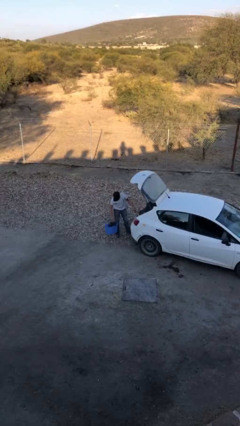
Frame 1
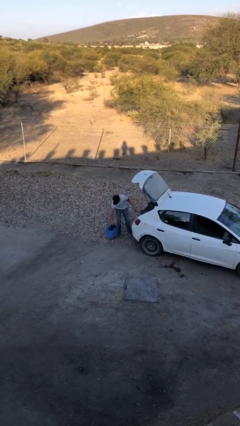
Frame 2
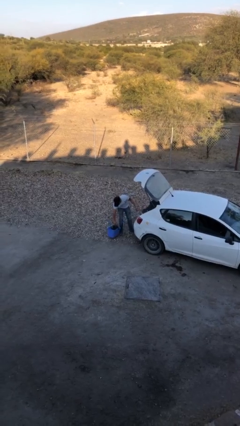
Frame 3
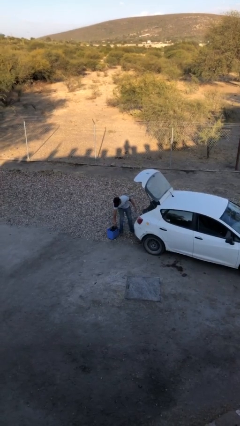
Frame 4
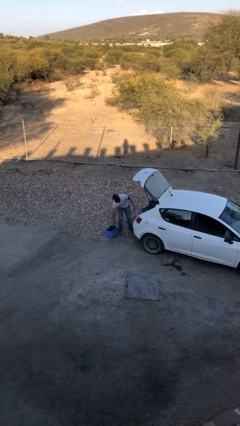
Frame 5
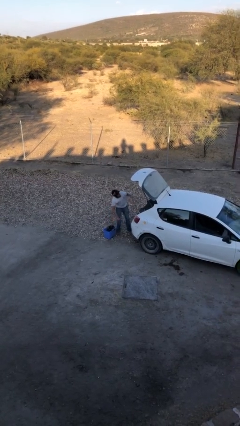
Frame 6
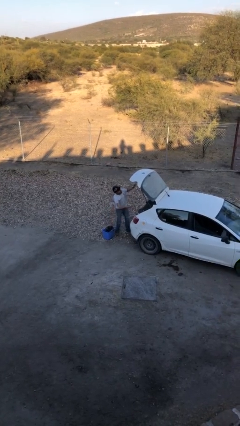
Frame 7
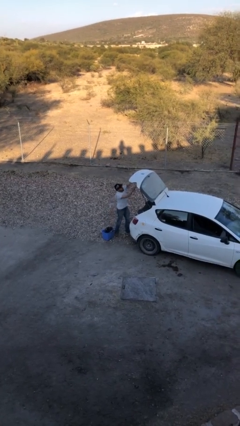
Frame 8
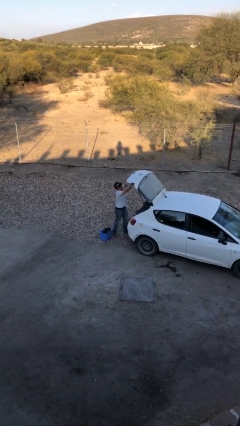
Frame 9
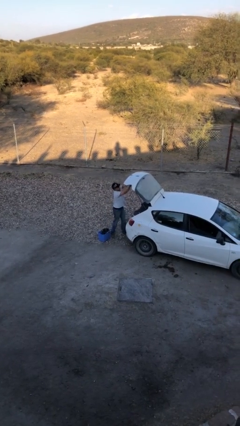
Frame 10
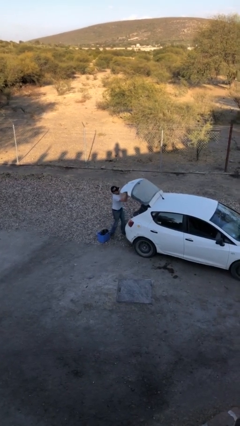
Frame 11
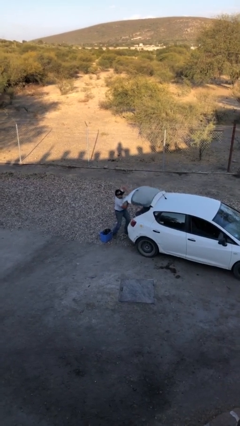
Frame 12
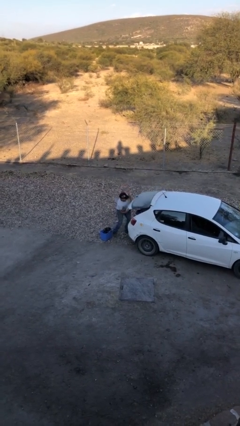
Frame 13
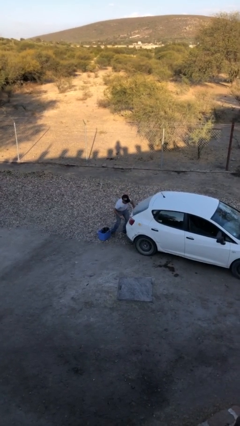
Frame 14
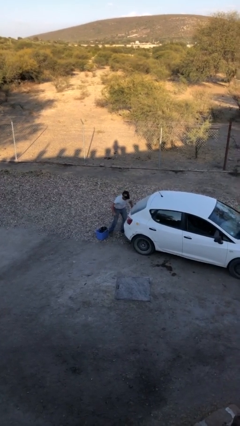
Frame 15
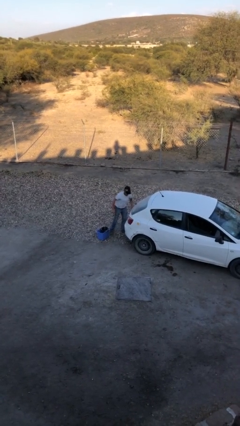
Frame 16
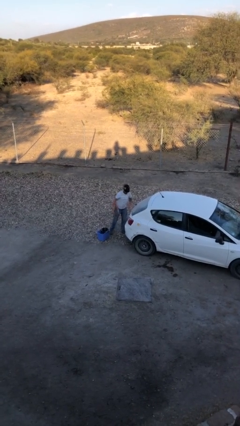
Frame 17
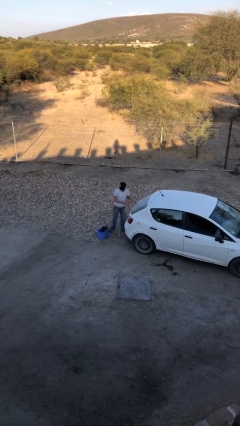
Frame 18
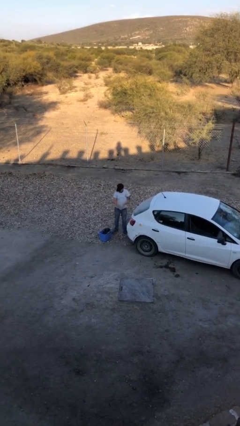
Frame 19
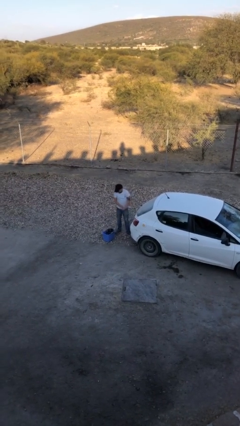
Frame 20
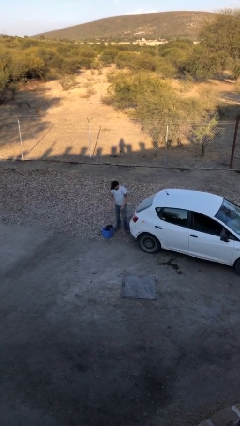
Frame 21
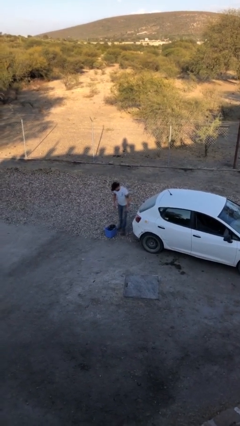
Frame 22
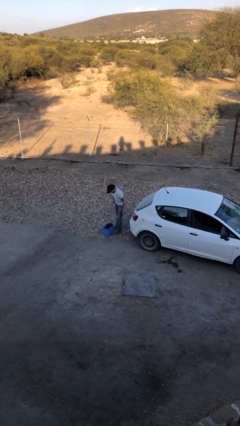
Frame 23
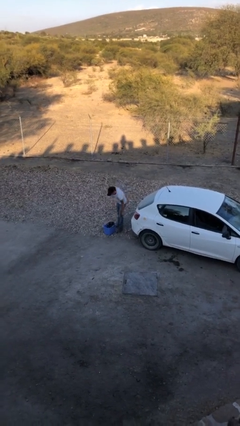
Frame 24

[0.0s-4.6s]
person closes car trunk

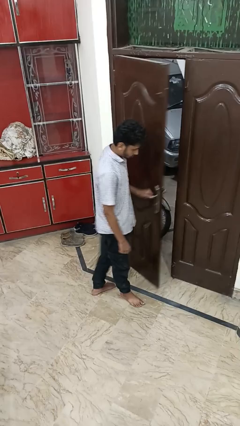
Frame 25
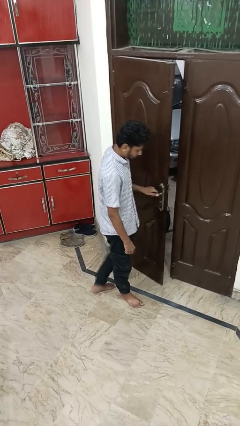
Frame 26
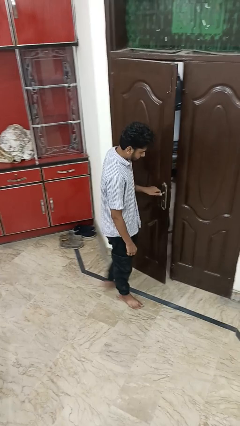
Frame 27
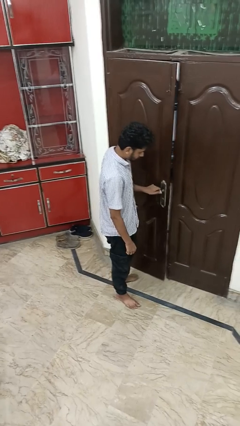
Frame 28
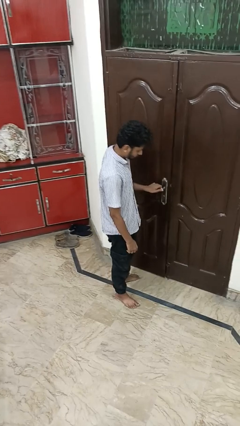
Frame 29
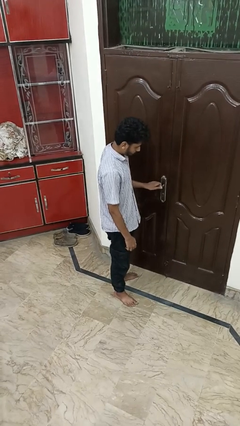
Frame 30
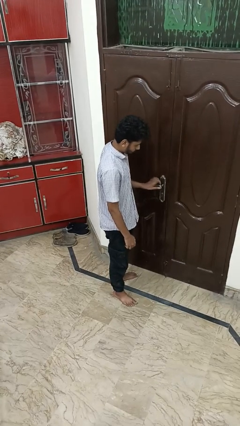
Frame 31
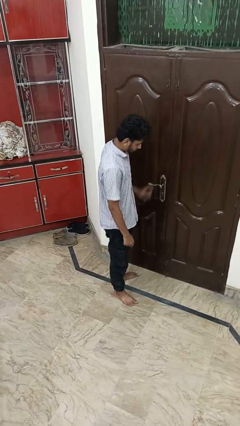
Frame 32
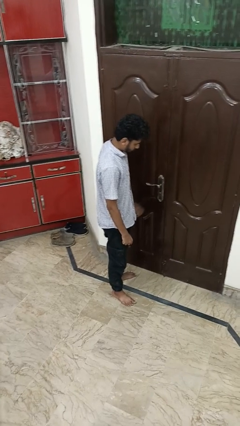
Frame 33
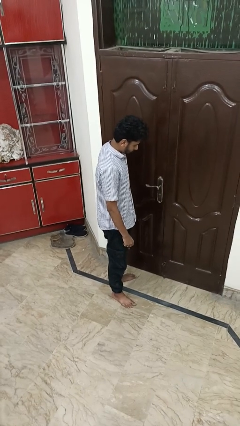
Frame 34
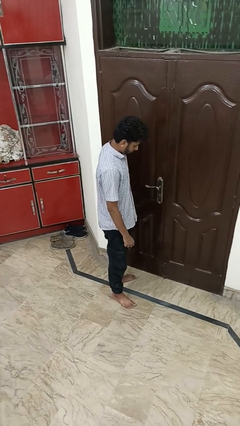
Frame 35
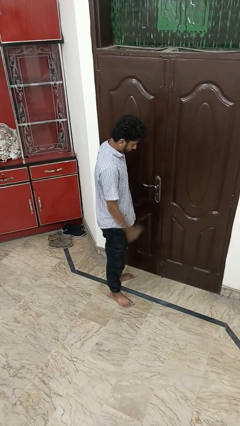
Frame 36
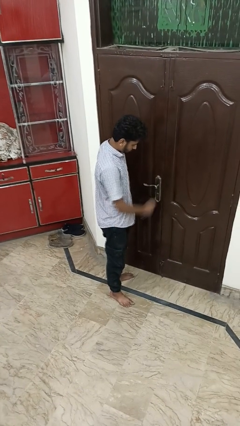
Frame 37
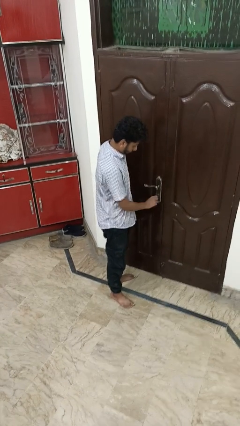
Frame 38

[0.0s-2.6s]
person closes facility door

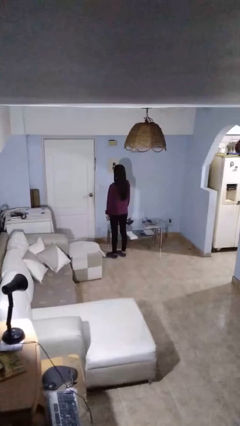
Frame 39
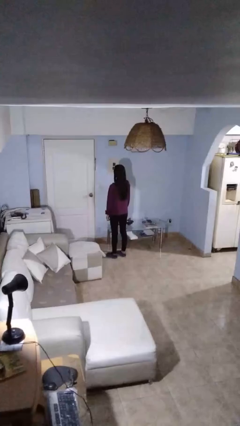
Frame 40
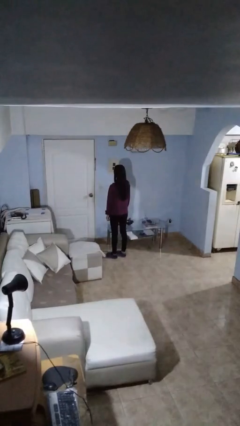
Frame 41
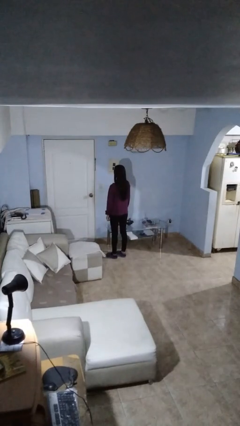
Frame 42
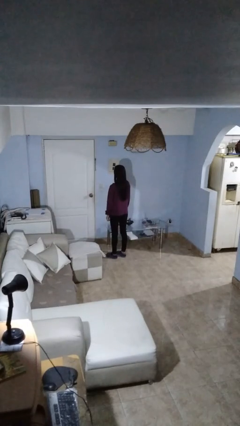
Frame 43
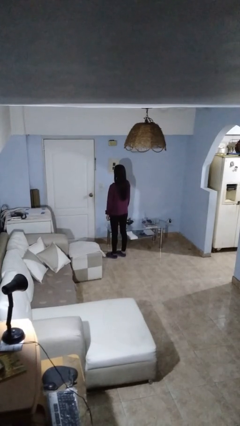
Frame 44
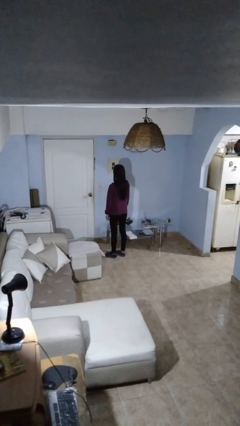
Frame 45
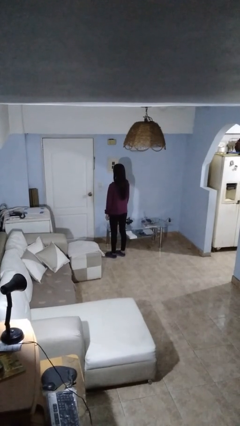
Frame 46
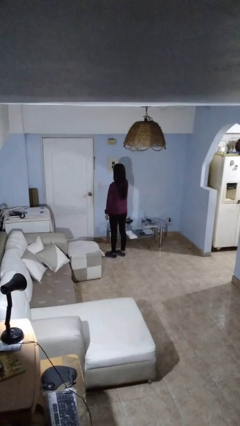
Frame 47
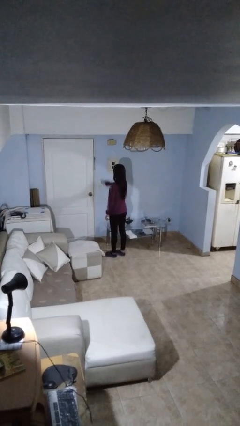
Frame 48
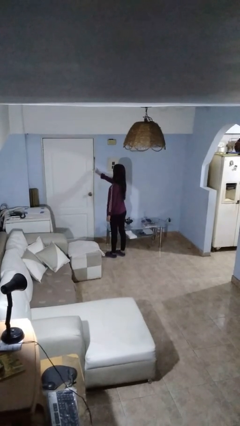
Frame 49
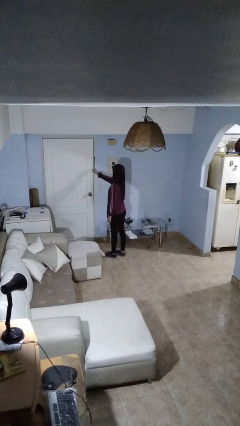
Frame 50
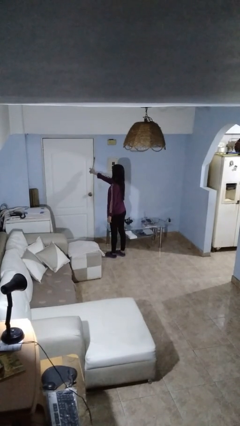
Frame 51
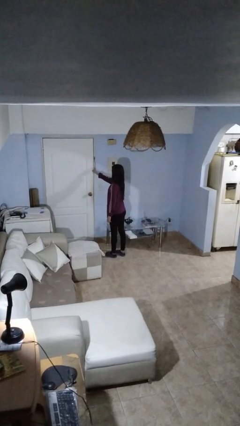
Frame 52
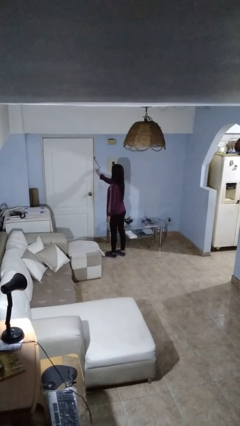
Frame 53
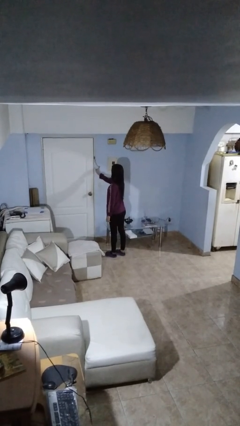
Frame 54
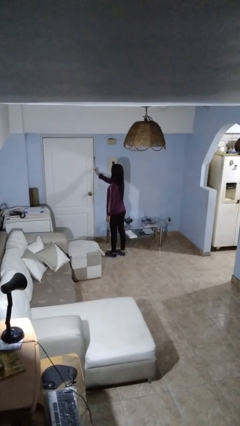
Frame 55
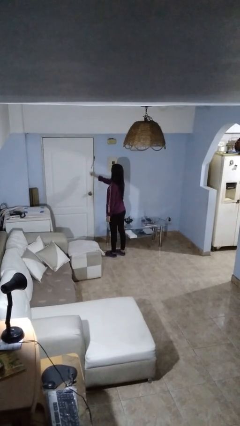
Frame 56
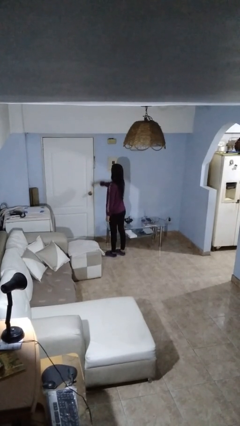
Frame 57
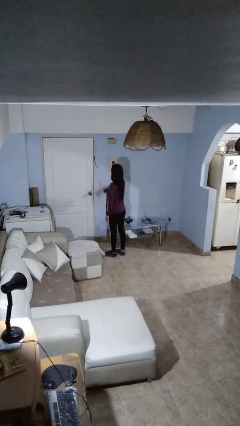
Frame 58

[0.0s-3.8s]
person taps object with finger

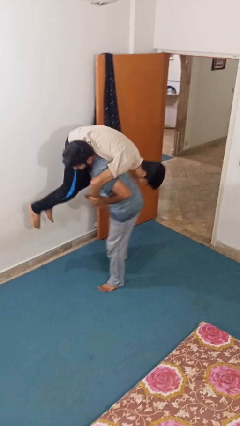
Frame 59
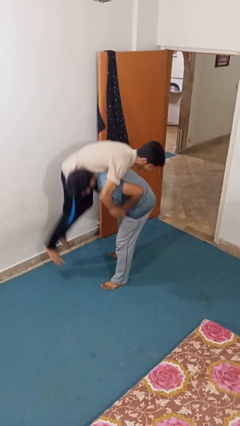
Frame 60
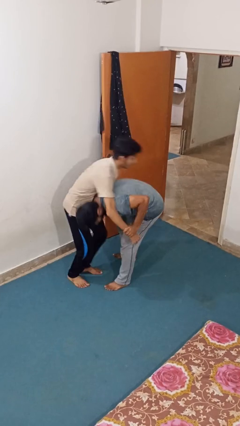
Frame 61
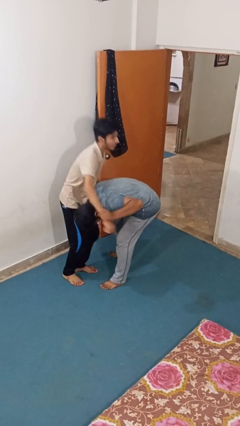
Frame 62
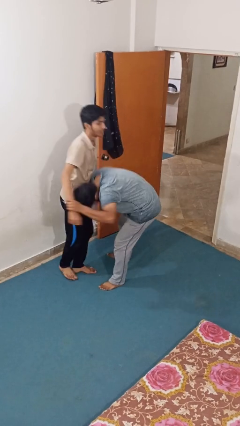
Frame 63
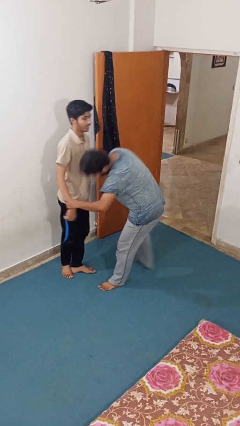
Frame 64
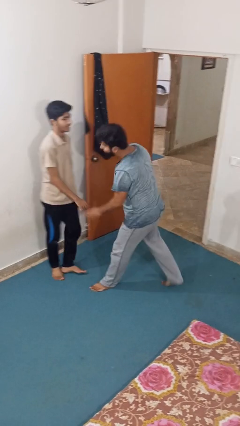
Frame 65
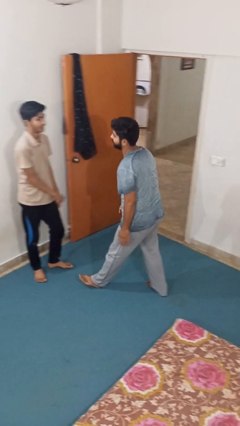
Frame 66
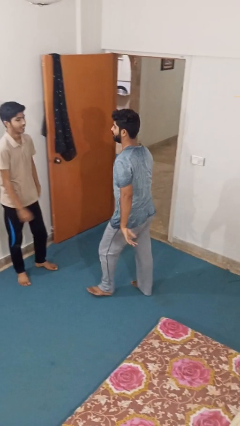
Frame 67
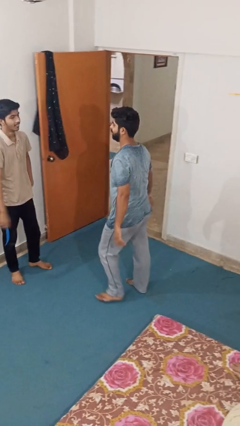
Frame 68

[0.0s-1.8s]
person puts down person

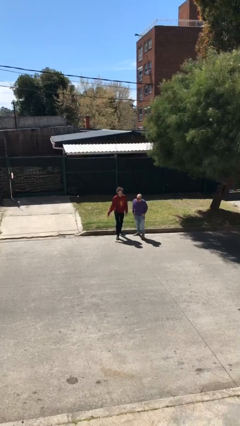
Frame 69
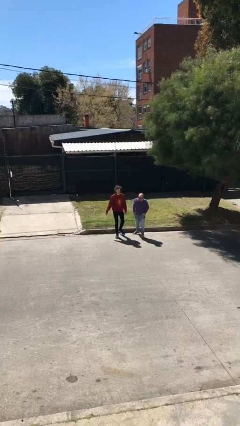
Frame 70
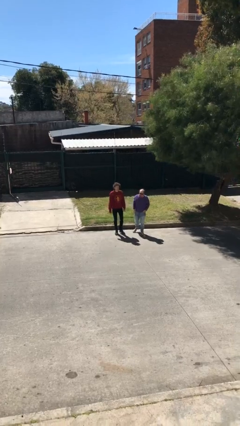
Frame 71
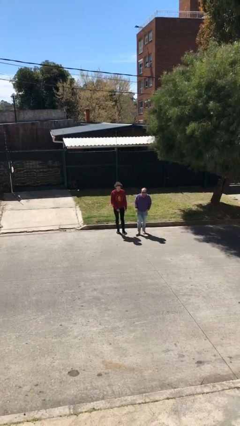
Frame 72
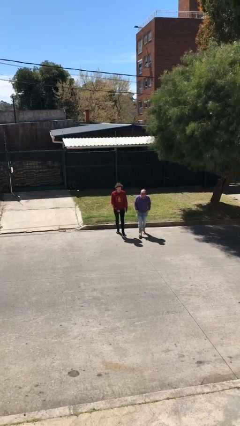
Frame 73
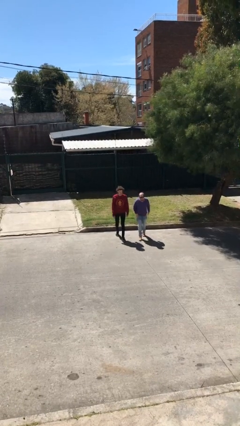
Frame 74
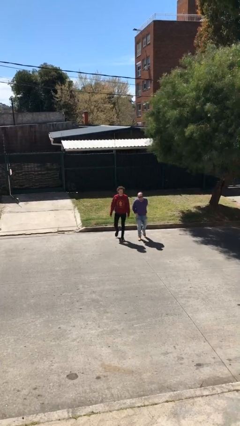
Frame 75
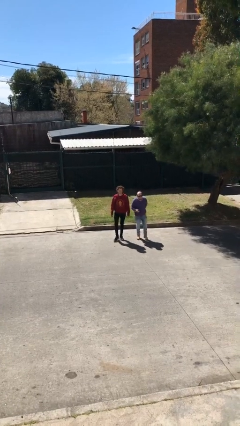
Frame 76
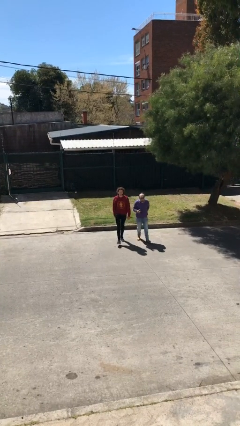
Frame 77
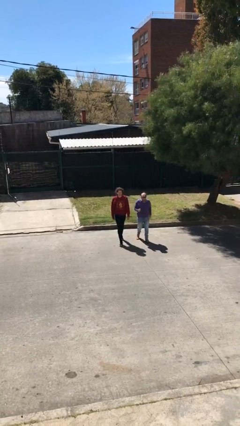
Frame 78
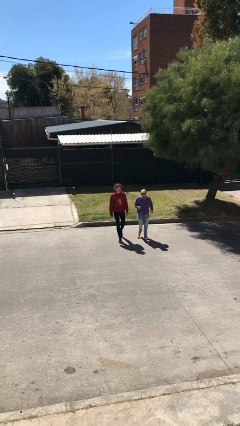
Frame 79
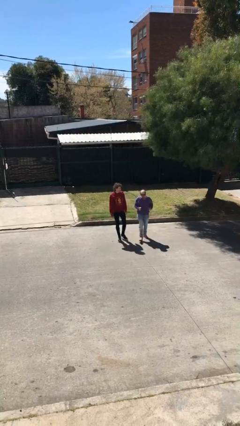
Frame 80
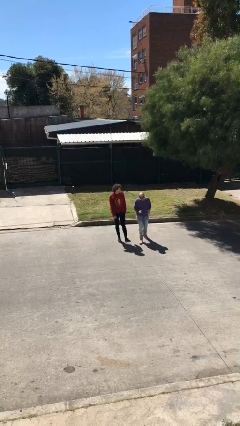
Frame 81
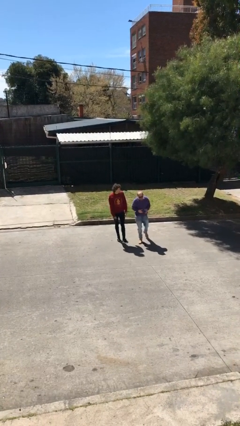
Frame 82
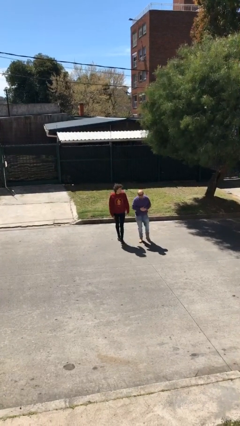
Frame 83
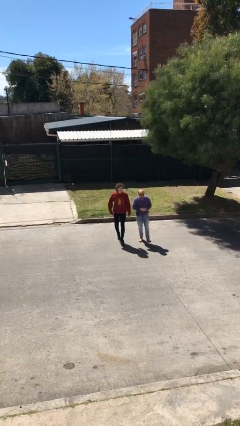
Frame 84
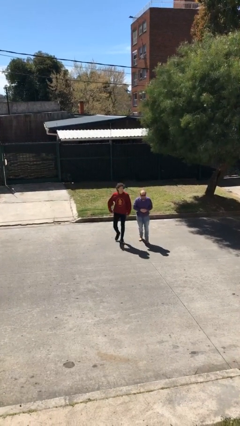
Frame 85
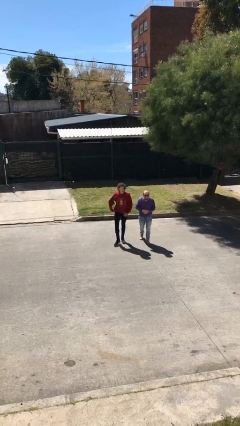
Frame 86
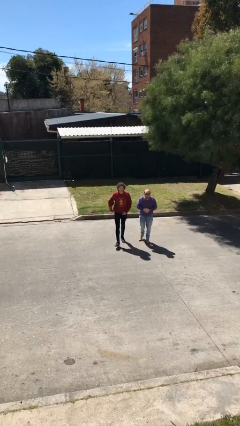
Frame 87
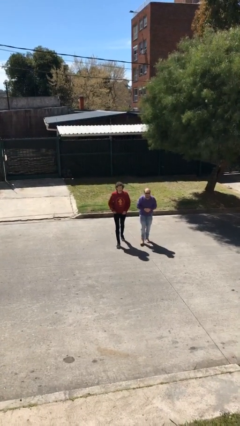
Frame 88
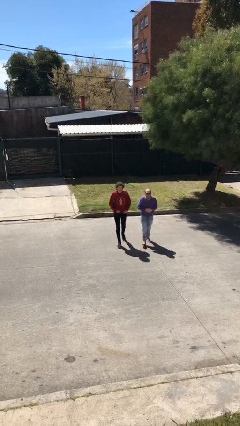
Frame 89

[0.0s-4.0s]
person talks to person

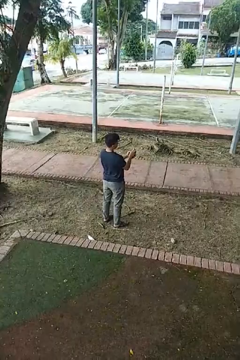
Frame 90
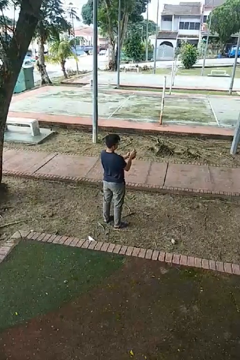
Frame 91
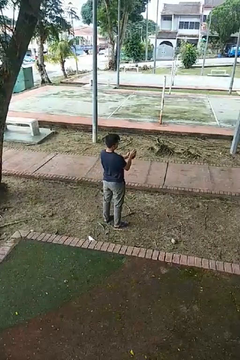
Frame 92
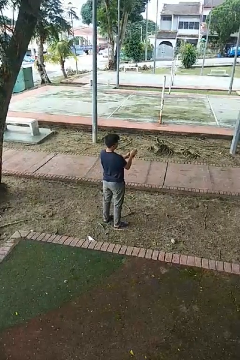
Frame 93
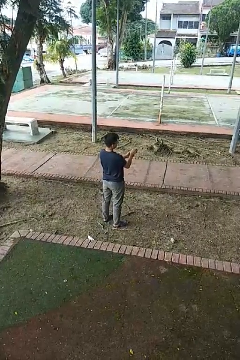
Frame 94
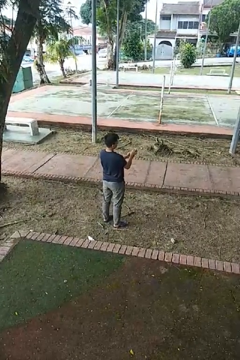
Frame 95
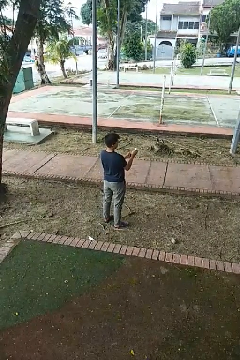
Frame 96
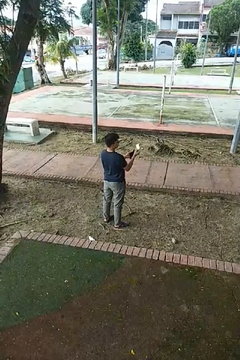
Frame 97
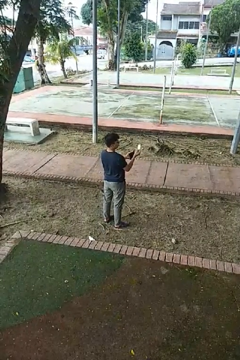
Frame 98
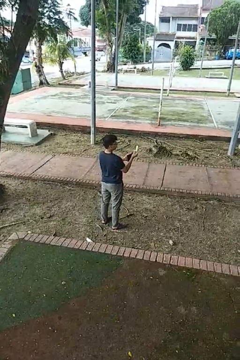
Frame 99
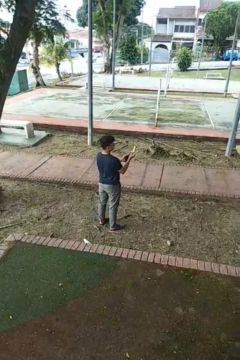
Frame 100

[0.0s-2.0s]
person takes object from purse
